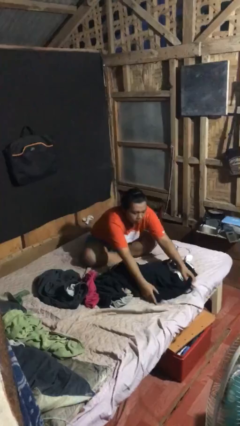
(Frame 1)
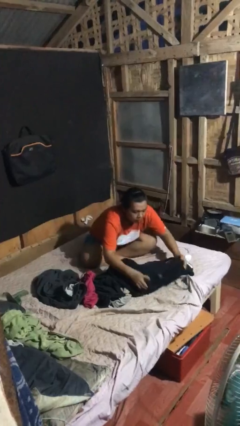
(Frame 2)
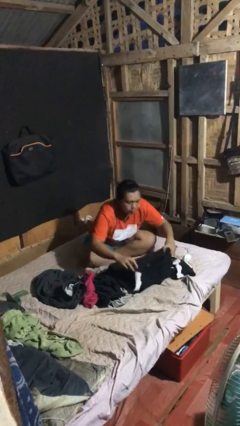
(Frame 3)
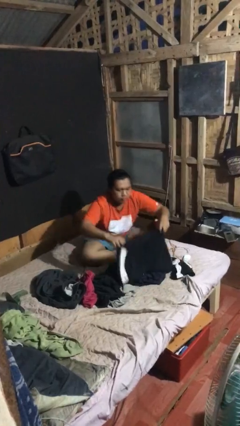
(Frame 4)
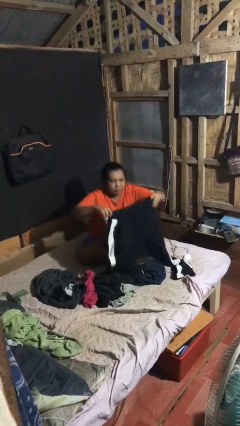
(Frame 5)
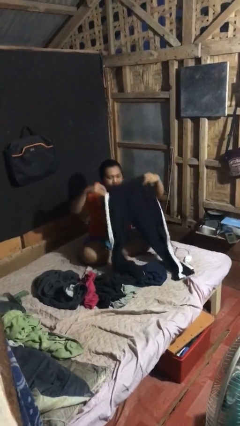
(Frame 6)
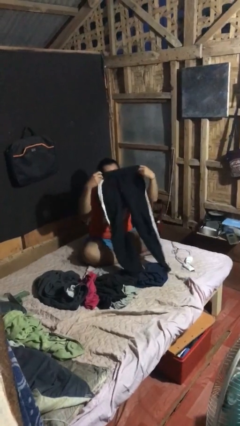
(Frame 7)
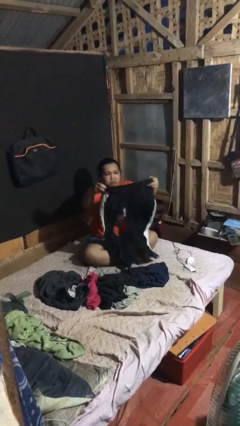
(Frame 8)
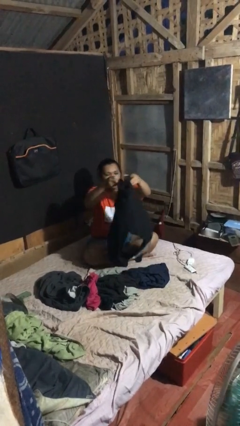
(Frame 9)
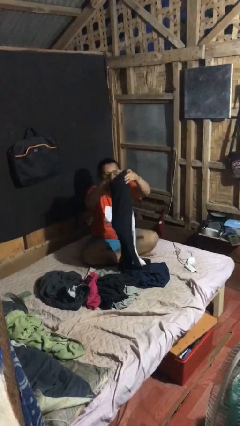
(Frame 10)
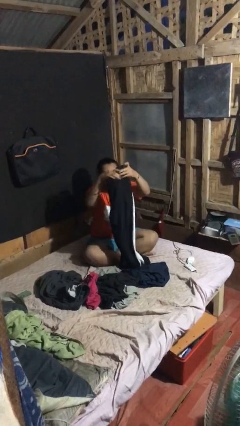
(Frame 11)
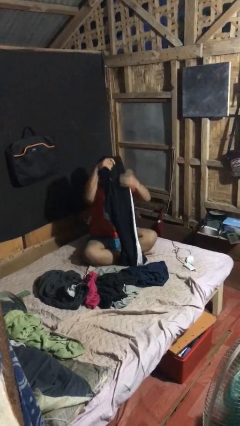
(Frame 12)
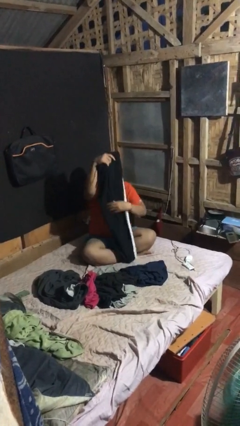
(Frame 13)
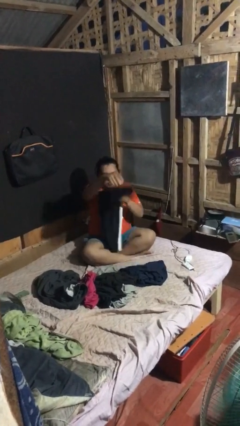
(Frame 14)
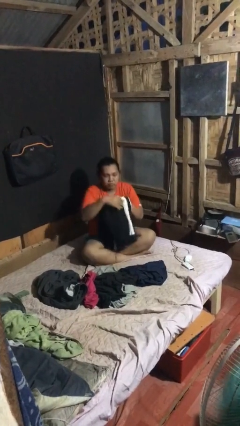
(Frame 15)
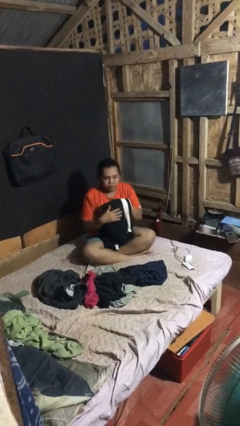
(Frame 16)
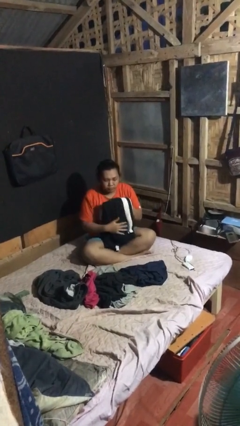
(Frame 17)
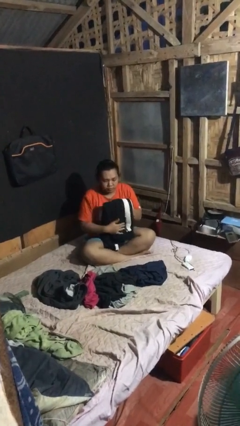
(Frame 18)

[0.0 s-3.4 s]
person folds pants

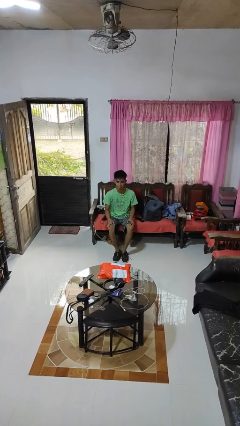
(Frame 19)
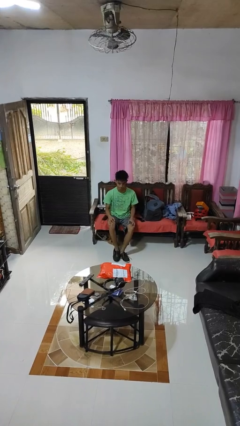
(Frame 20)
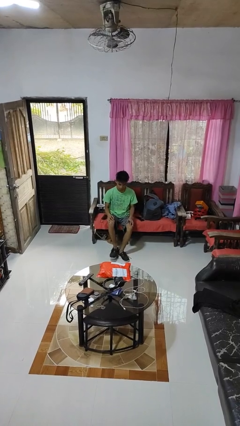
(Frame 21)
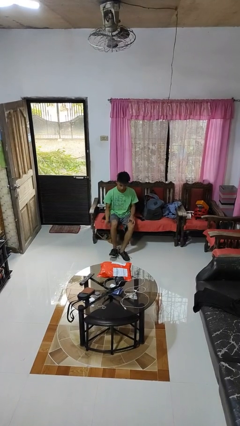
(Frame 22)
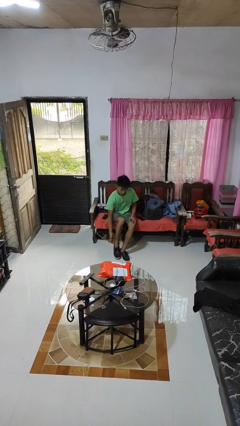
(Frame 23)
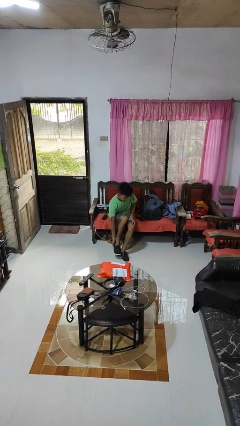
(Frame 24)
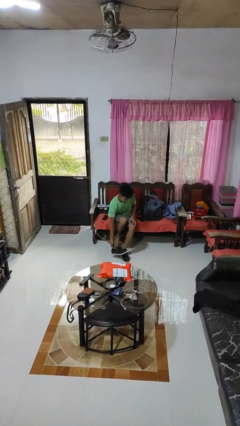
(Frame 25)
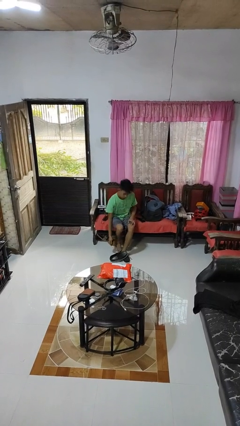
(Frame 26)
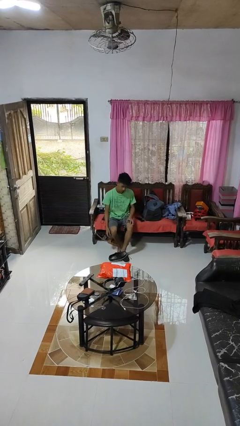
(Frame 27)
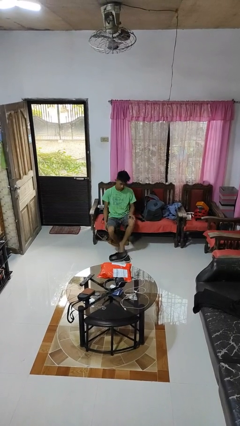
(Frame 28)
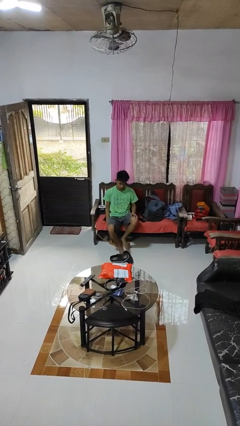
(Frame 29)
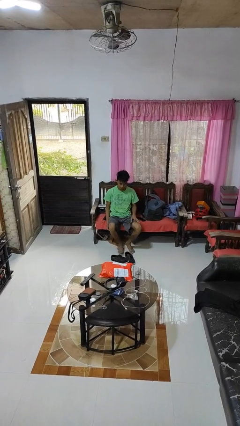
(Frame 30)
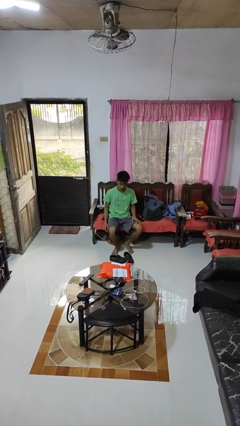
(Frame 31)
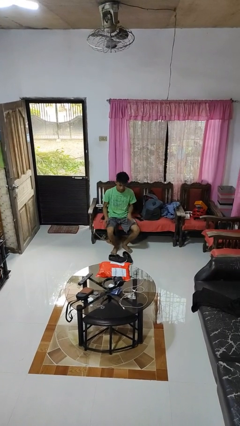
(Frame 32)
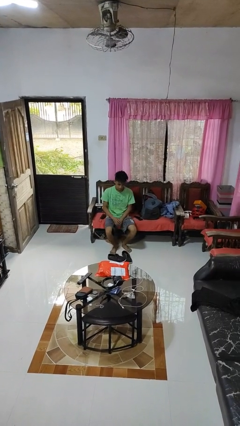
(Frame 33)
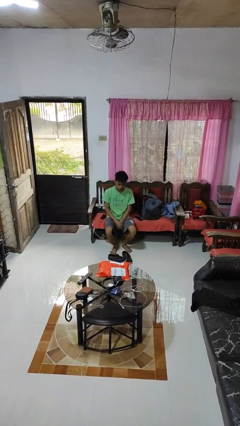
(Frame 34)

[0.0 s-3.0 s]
person takes off shoes

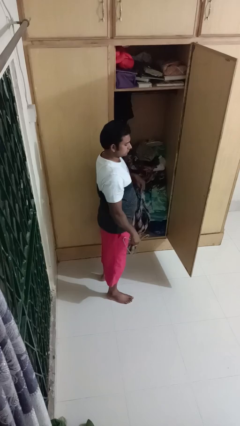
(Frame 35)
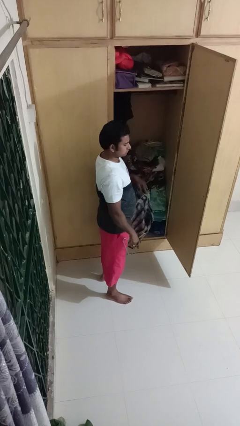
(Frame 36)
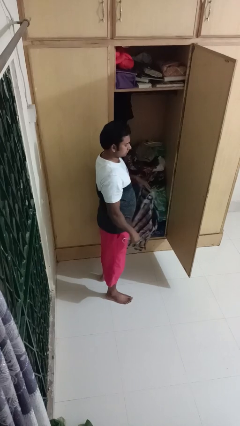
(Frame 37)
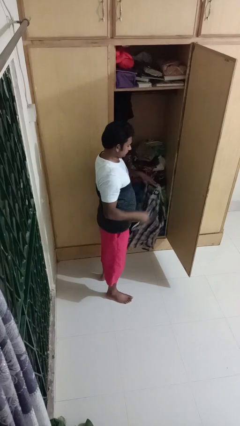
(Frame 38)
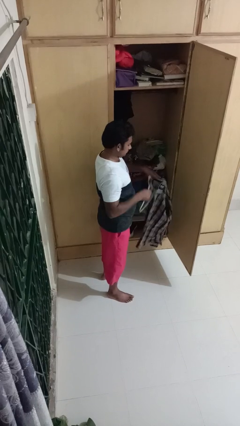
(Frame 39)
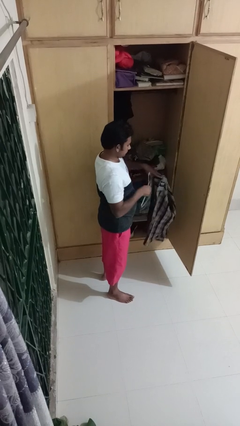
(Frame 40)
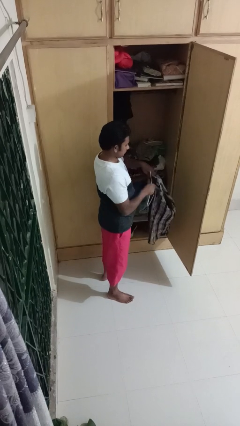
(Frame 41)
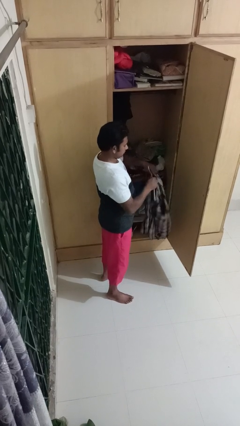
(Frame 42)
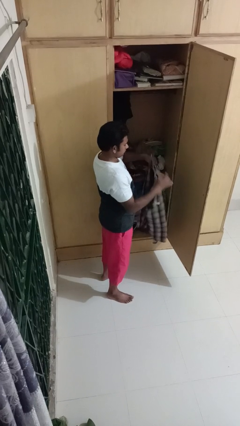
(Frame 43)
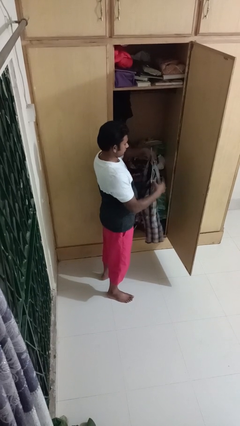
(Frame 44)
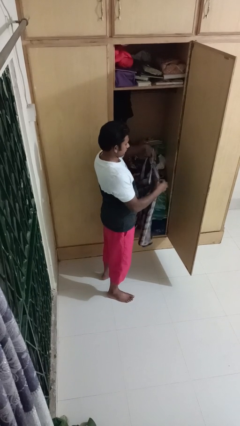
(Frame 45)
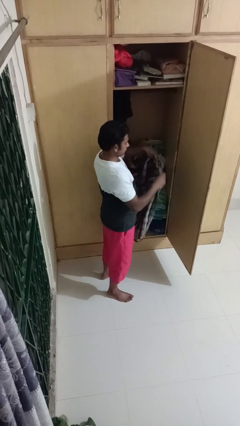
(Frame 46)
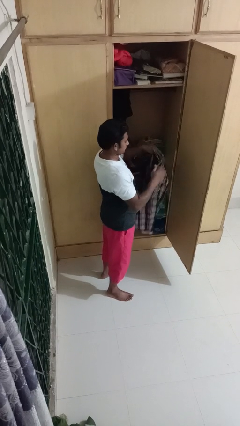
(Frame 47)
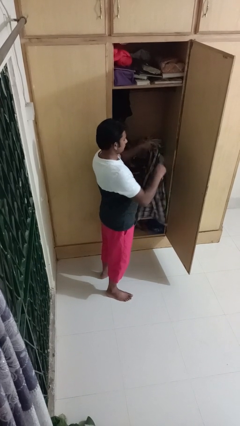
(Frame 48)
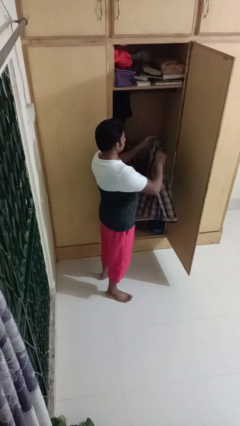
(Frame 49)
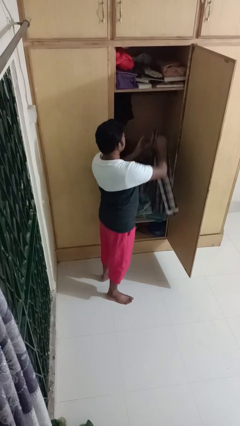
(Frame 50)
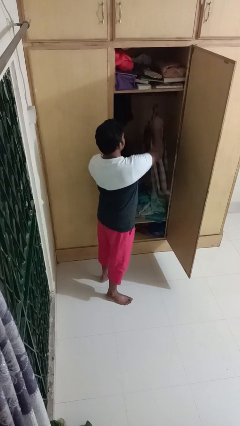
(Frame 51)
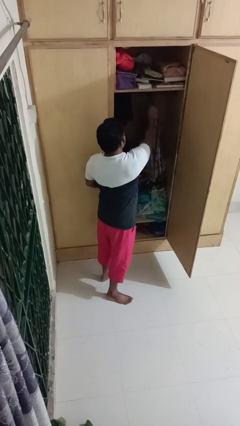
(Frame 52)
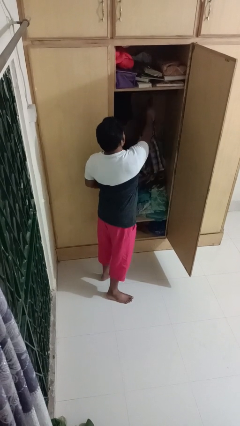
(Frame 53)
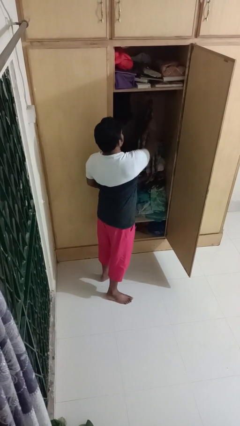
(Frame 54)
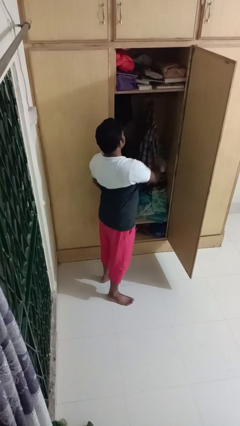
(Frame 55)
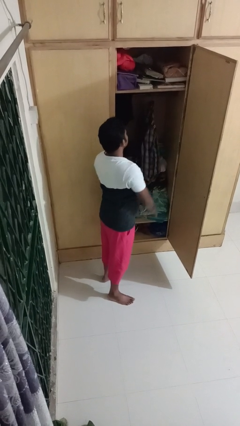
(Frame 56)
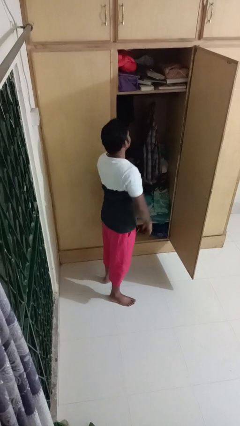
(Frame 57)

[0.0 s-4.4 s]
person puts clothes into closet

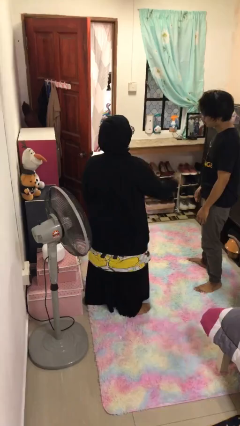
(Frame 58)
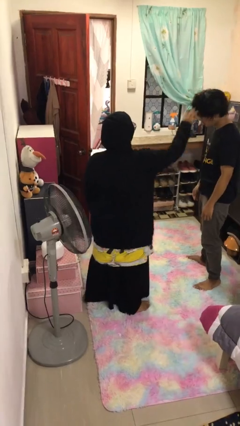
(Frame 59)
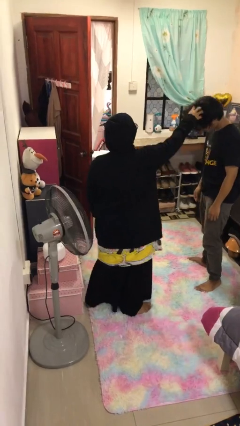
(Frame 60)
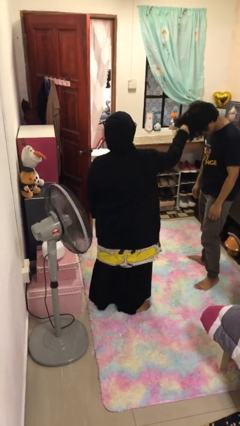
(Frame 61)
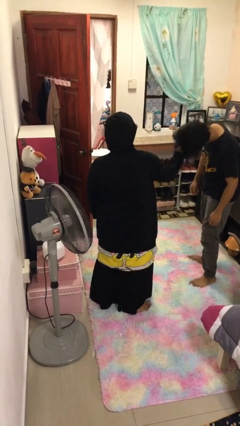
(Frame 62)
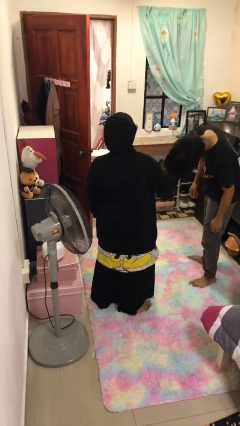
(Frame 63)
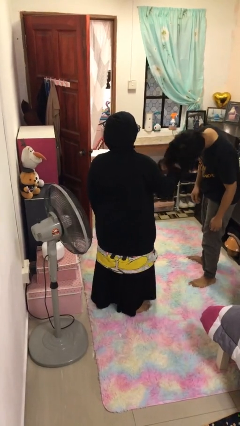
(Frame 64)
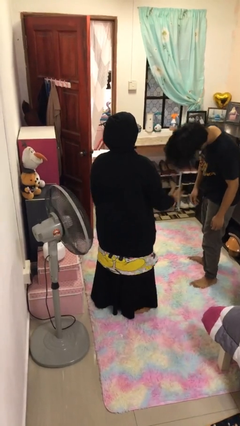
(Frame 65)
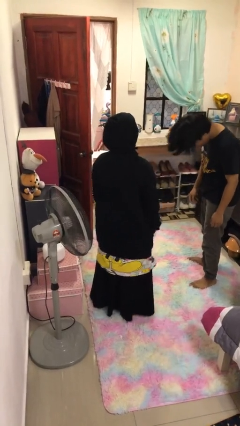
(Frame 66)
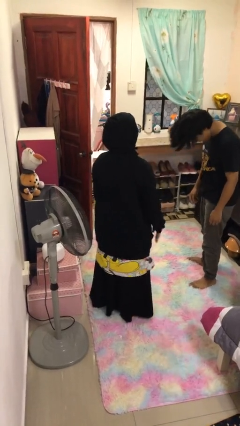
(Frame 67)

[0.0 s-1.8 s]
person grabs person by hair

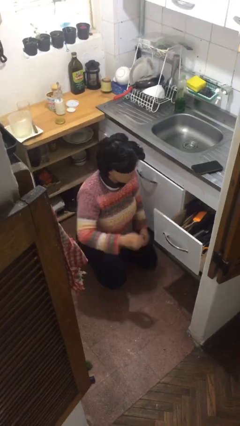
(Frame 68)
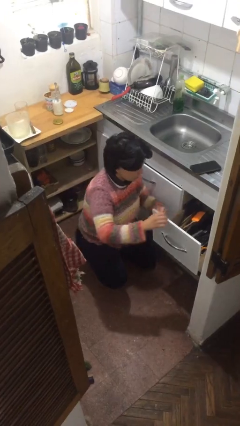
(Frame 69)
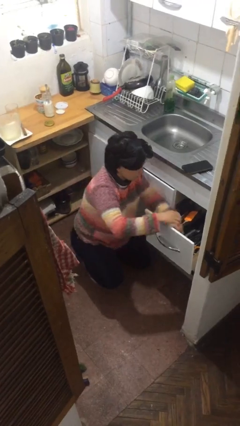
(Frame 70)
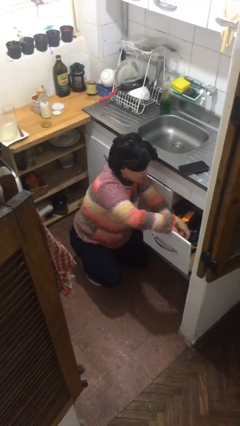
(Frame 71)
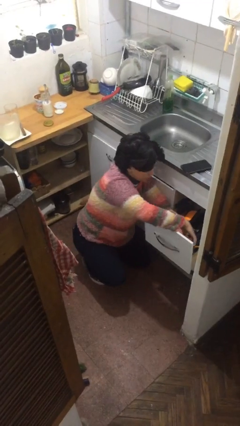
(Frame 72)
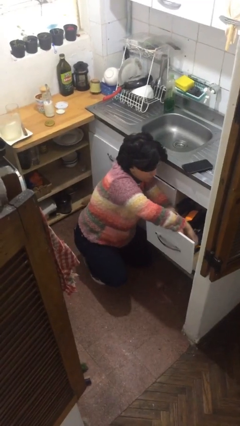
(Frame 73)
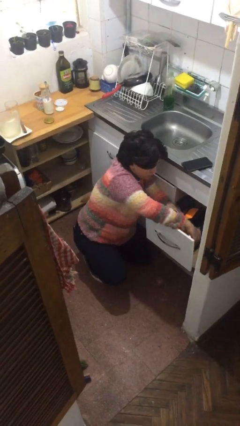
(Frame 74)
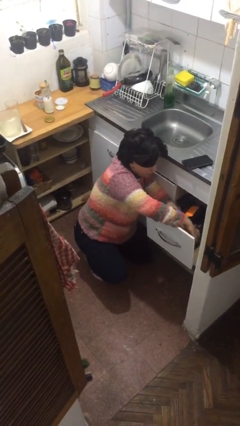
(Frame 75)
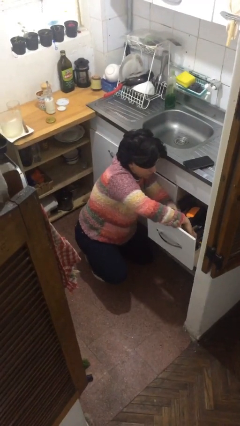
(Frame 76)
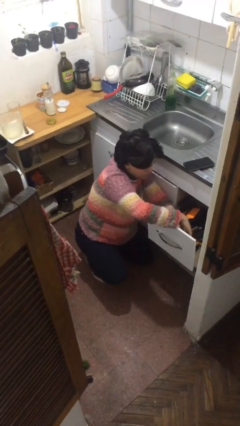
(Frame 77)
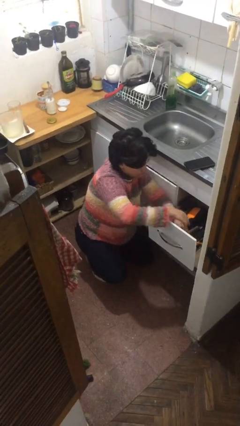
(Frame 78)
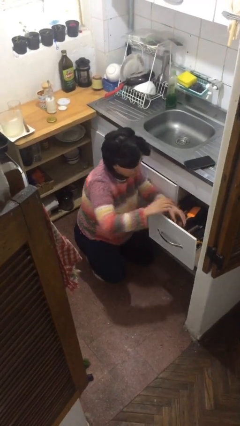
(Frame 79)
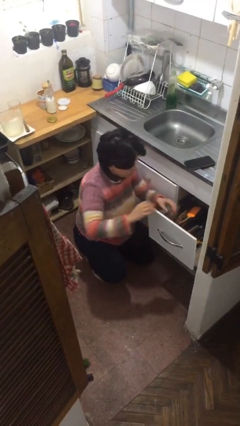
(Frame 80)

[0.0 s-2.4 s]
person searches in kitchen drawer

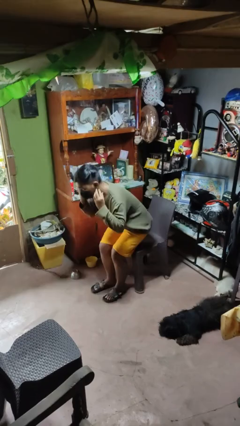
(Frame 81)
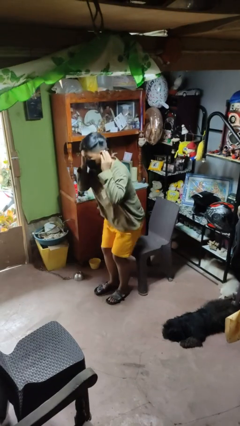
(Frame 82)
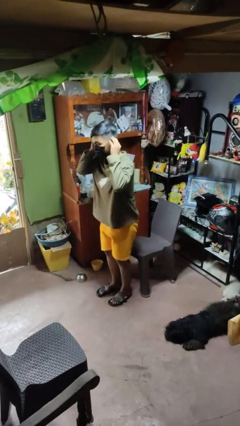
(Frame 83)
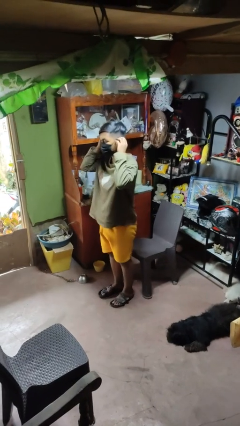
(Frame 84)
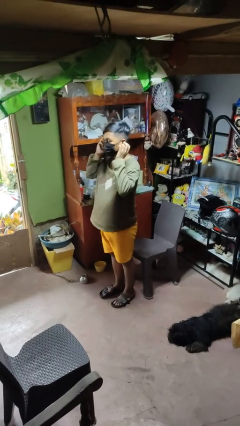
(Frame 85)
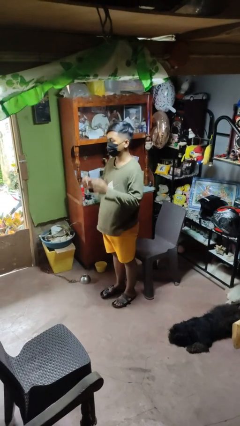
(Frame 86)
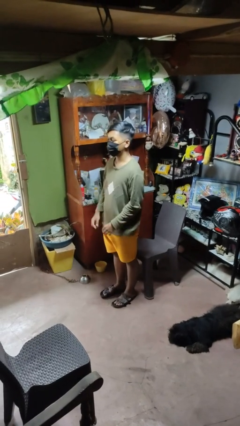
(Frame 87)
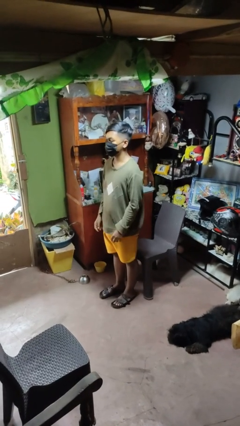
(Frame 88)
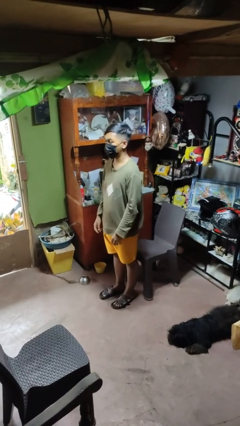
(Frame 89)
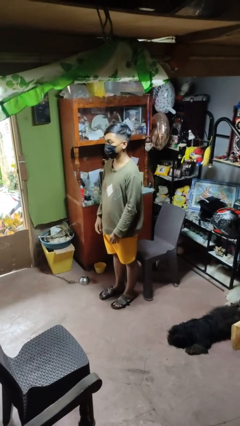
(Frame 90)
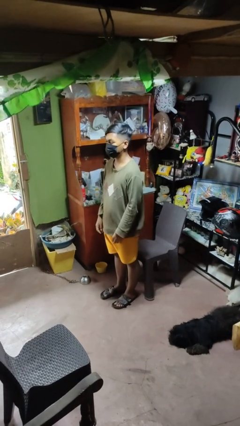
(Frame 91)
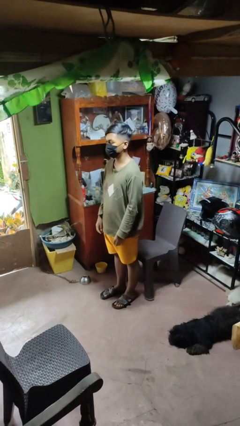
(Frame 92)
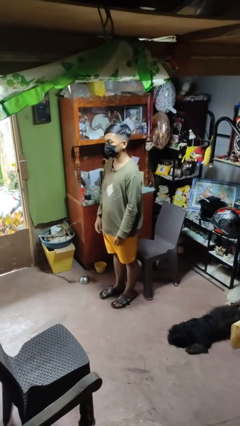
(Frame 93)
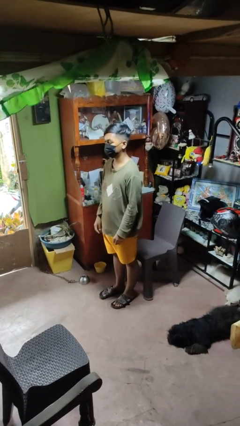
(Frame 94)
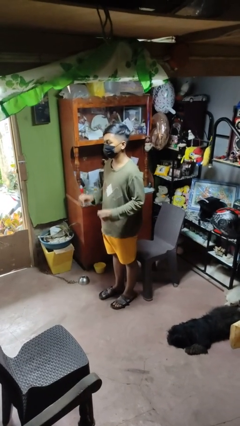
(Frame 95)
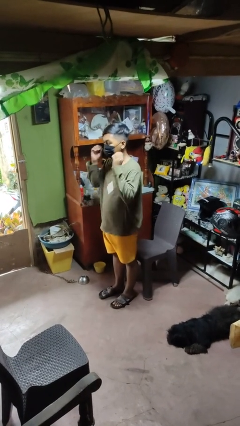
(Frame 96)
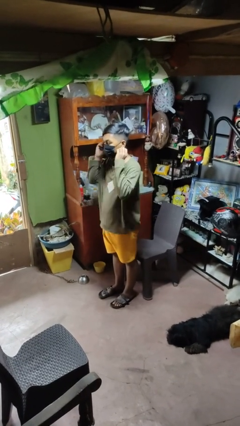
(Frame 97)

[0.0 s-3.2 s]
person puts on facemask
